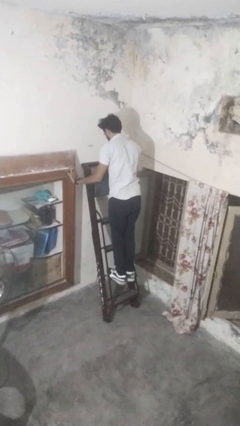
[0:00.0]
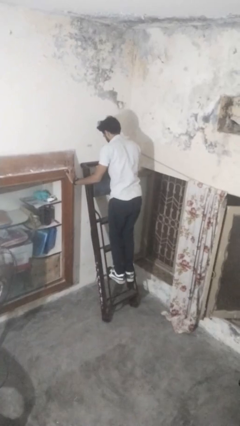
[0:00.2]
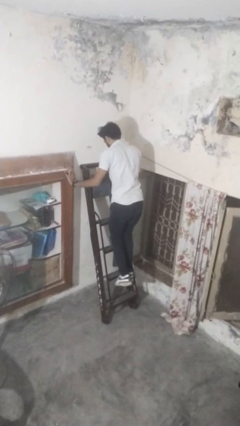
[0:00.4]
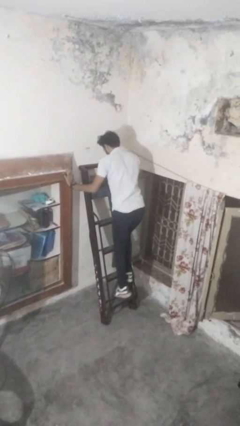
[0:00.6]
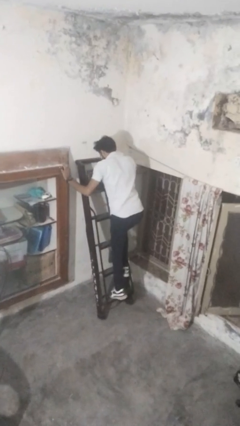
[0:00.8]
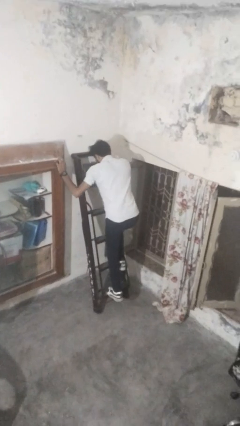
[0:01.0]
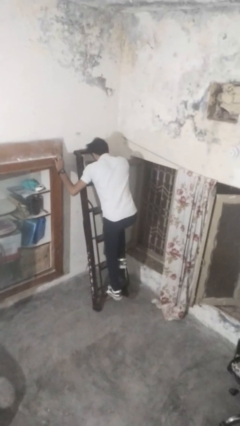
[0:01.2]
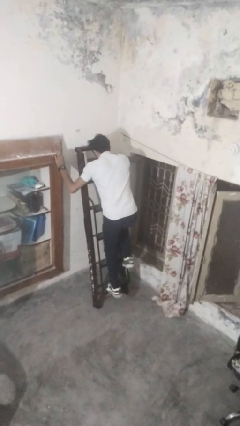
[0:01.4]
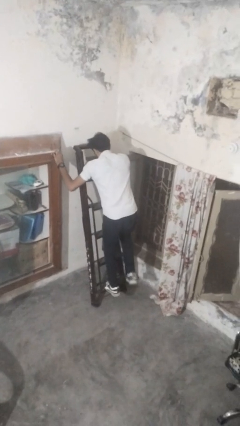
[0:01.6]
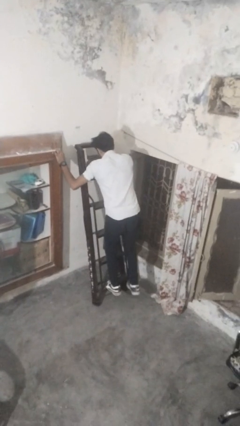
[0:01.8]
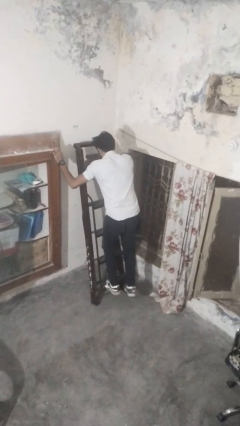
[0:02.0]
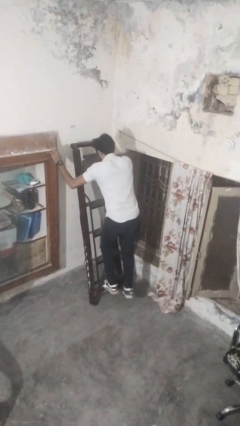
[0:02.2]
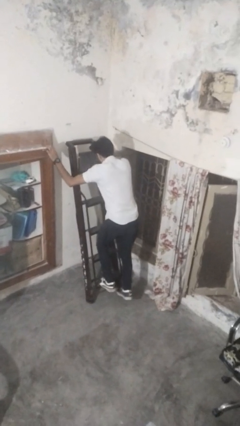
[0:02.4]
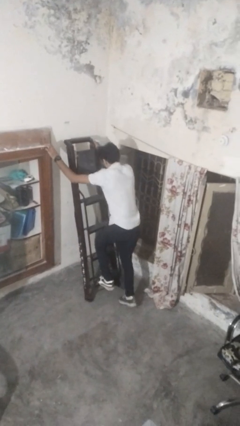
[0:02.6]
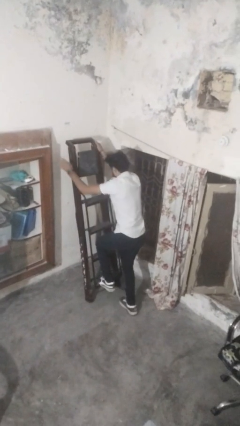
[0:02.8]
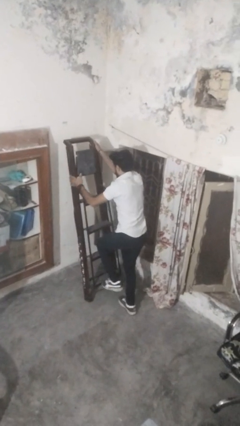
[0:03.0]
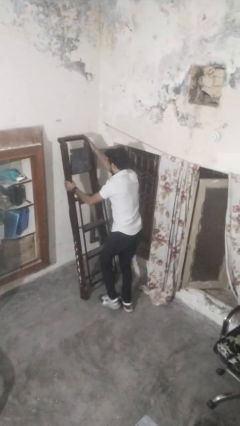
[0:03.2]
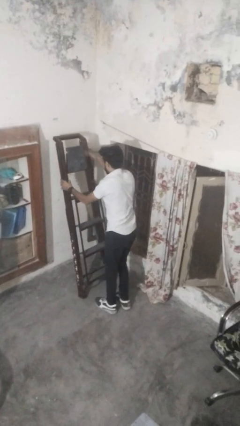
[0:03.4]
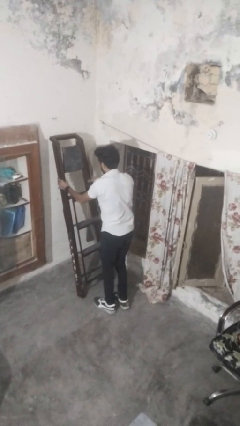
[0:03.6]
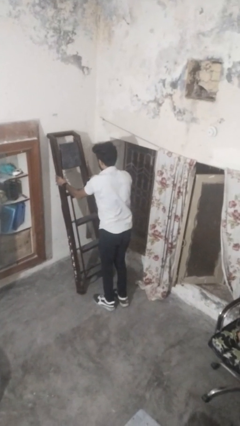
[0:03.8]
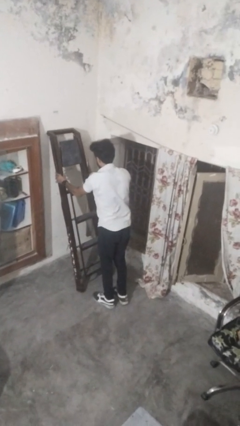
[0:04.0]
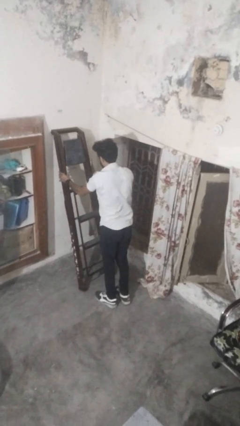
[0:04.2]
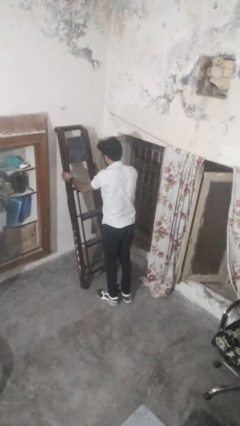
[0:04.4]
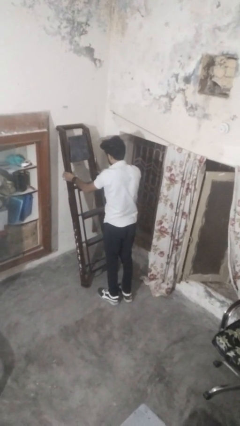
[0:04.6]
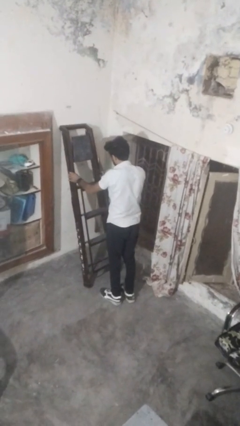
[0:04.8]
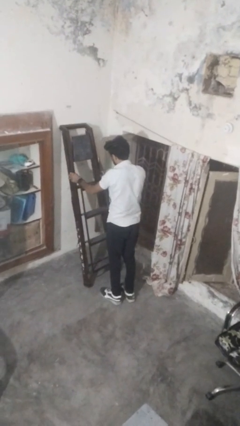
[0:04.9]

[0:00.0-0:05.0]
person climbs down ladder

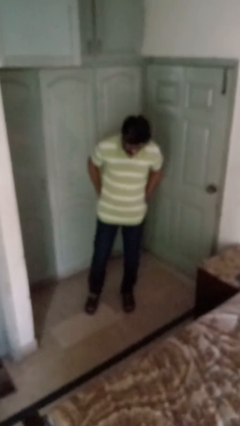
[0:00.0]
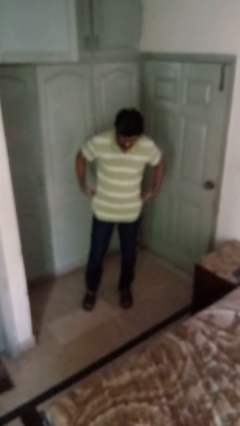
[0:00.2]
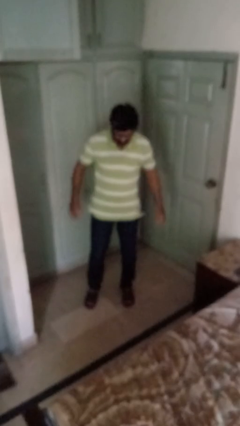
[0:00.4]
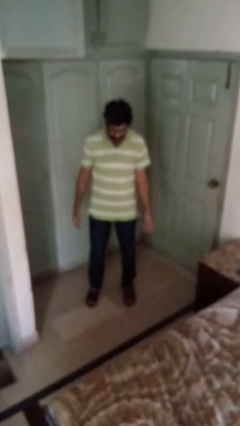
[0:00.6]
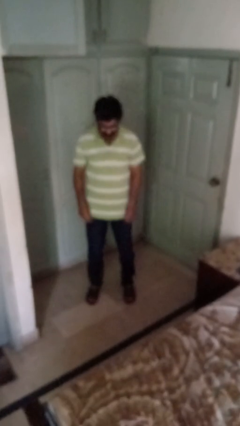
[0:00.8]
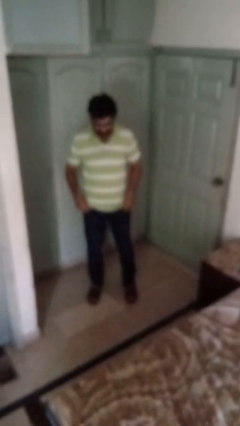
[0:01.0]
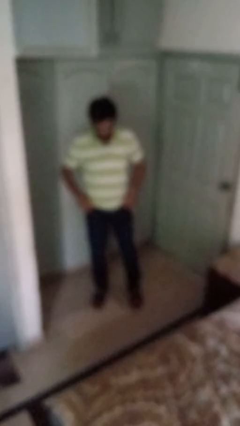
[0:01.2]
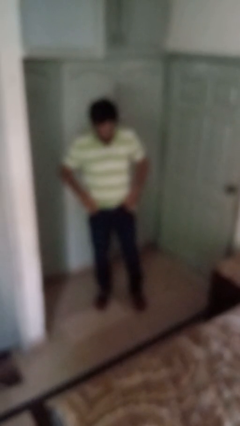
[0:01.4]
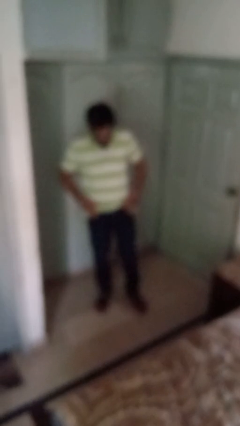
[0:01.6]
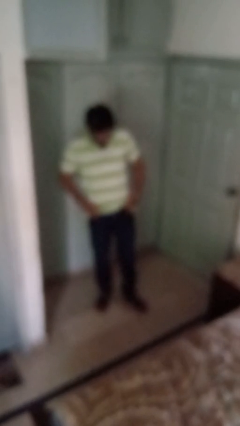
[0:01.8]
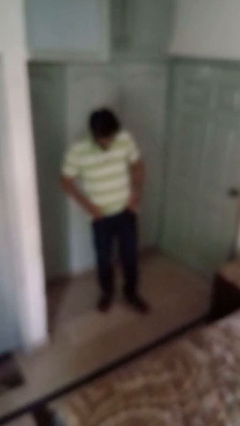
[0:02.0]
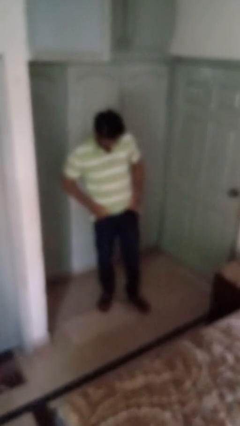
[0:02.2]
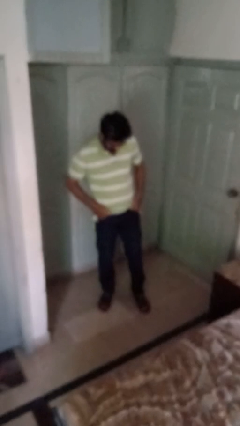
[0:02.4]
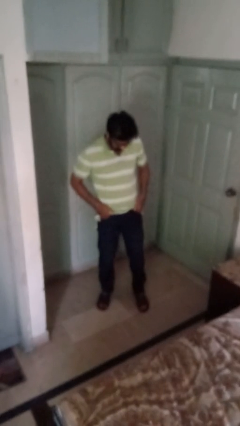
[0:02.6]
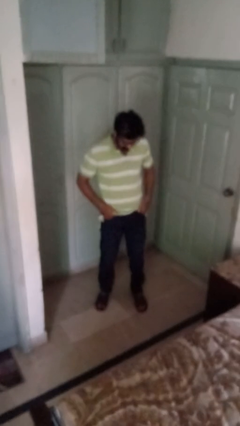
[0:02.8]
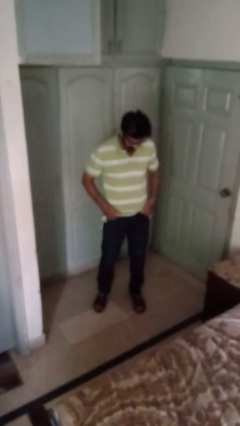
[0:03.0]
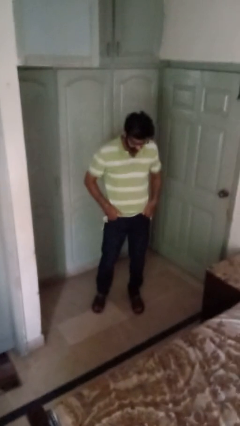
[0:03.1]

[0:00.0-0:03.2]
person puts hands in back pockets

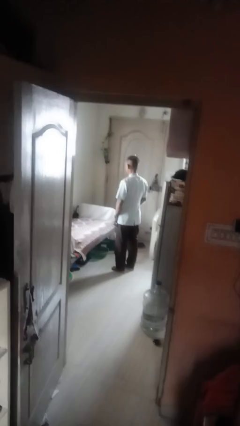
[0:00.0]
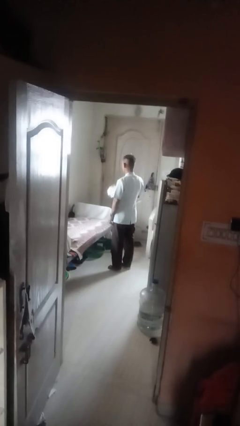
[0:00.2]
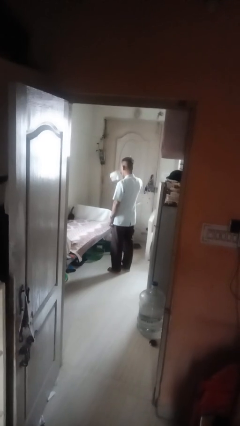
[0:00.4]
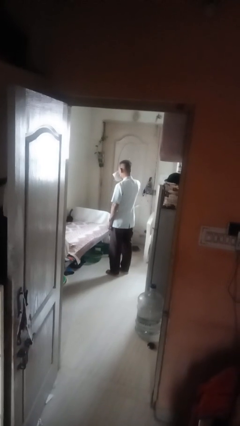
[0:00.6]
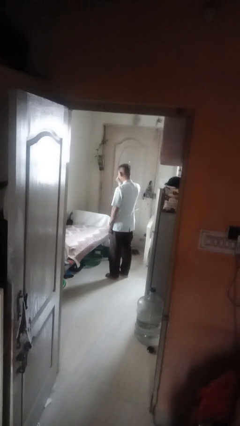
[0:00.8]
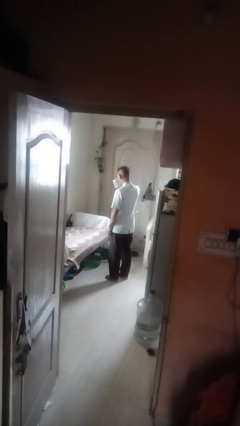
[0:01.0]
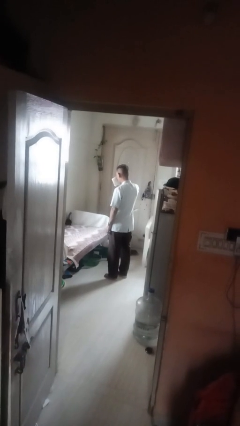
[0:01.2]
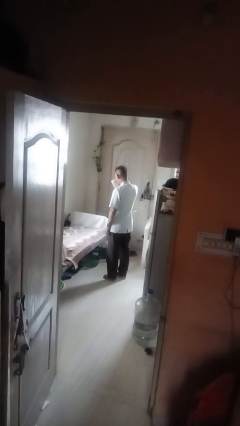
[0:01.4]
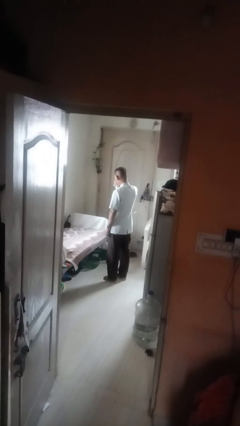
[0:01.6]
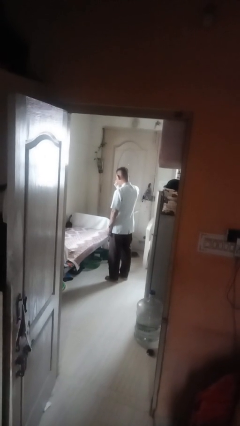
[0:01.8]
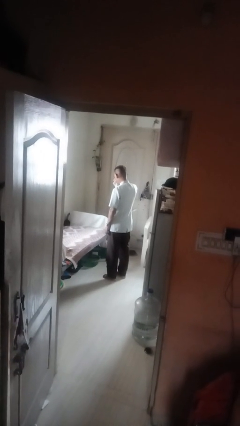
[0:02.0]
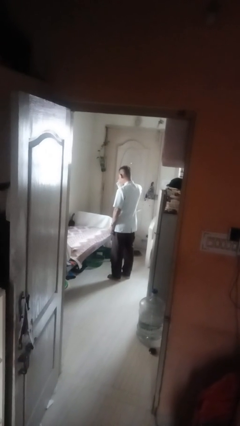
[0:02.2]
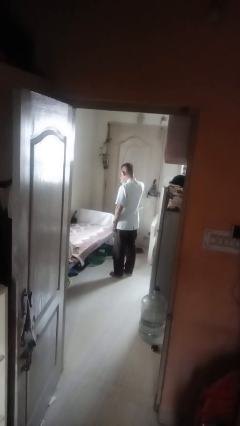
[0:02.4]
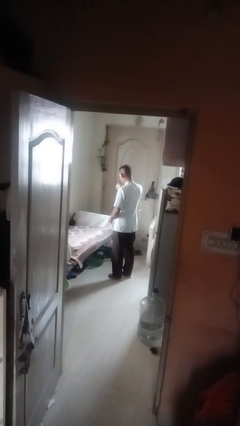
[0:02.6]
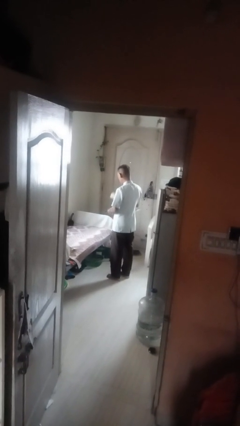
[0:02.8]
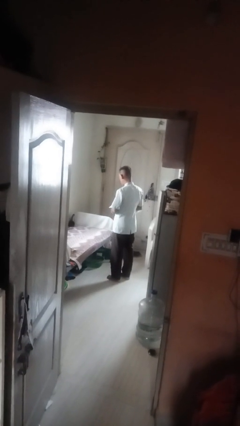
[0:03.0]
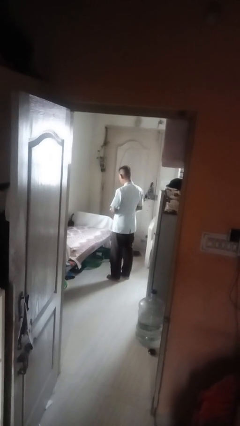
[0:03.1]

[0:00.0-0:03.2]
person blows nose

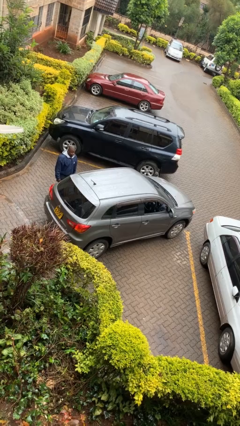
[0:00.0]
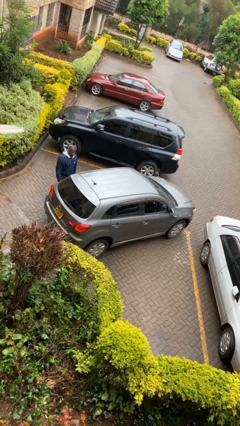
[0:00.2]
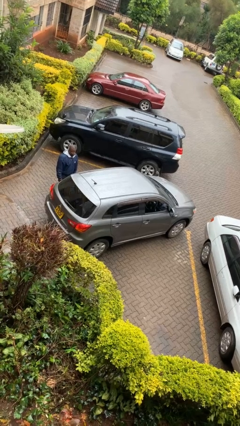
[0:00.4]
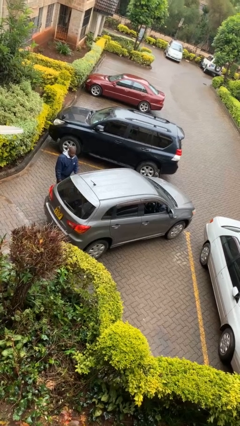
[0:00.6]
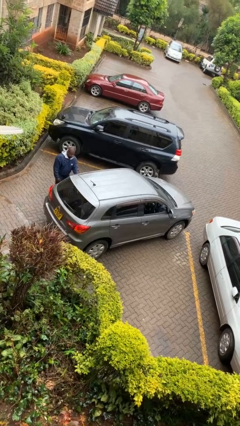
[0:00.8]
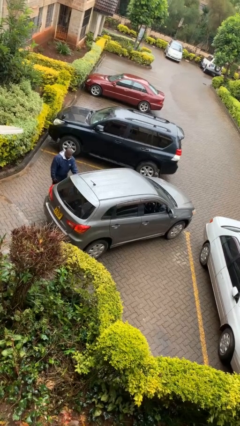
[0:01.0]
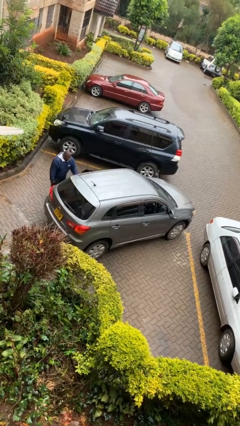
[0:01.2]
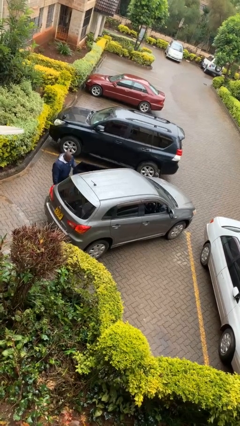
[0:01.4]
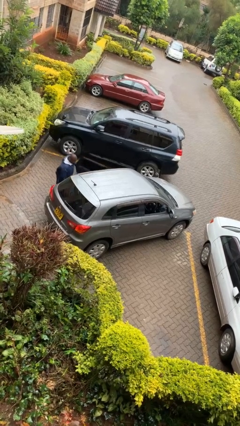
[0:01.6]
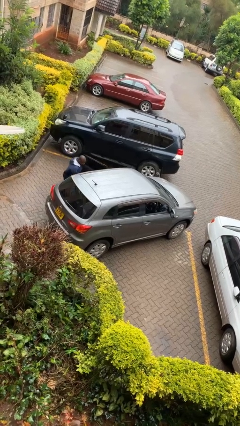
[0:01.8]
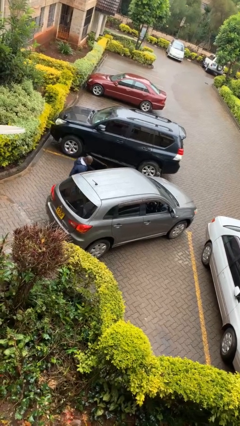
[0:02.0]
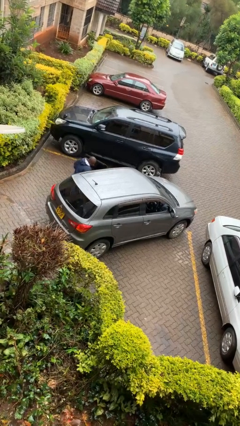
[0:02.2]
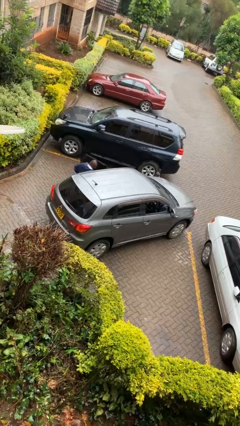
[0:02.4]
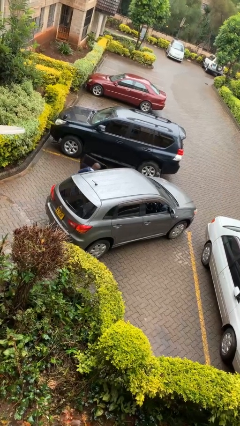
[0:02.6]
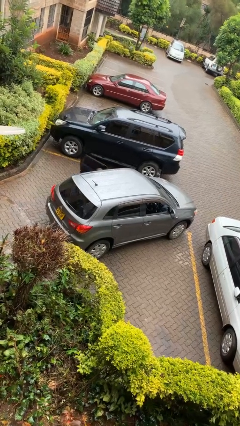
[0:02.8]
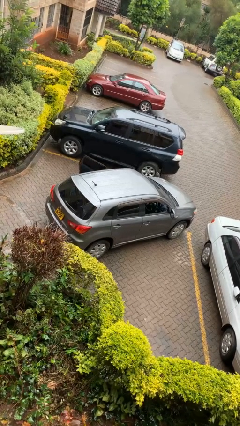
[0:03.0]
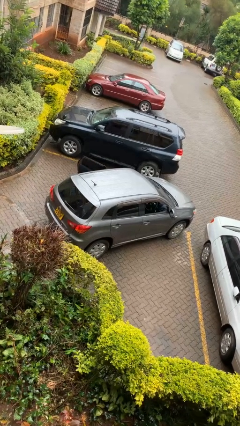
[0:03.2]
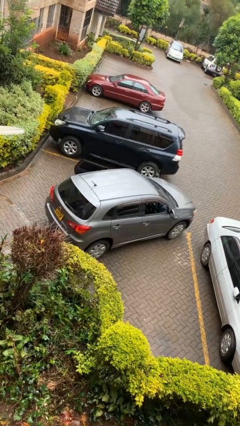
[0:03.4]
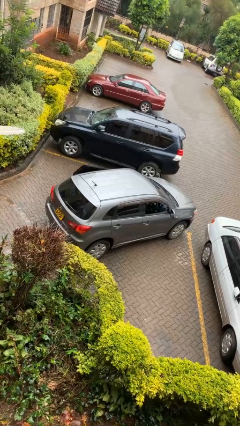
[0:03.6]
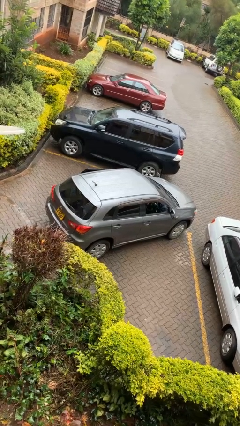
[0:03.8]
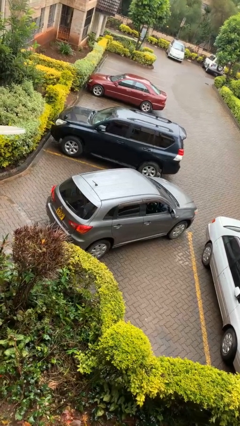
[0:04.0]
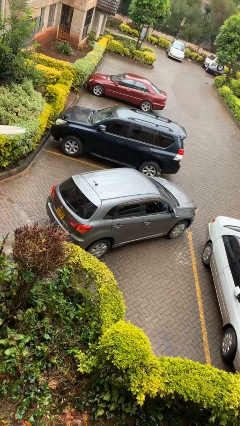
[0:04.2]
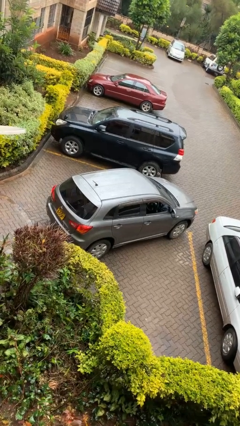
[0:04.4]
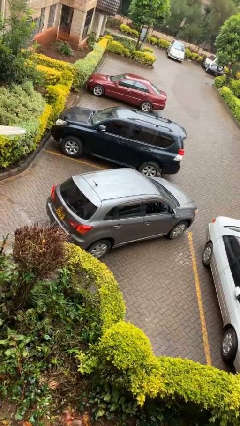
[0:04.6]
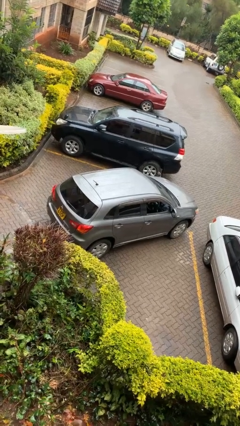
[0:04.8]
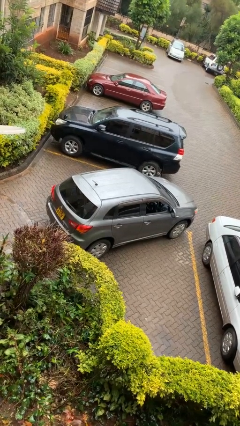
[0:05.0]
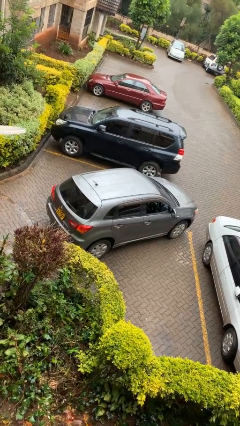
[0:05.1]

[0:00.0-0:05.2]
car picks up person

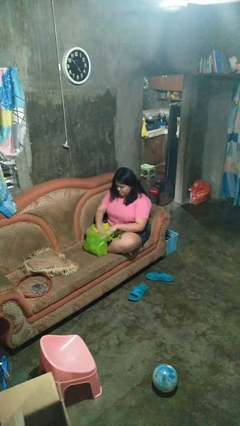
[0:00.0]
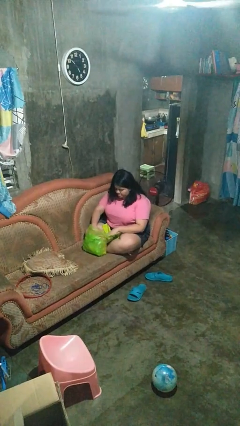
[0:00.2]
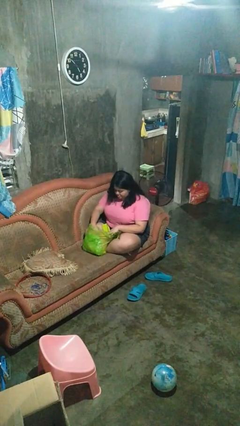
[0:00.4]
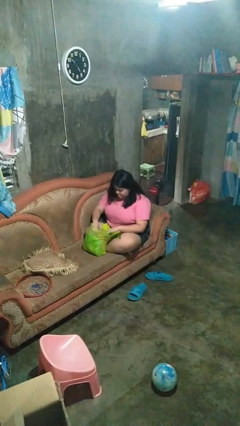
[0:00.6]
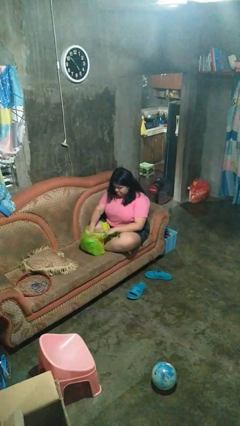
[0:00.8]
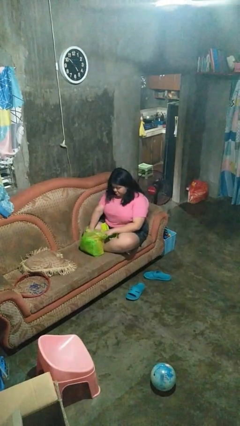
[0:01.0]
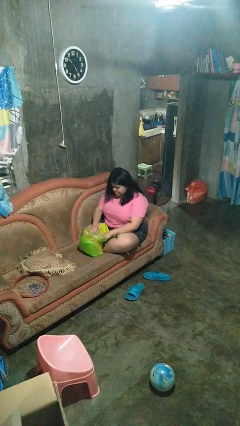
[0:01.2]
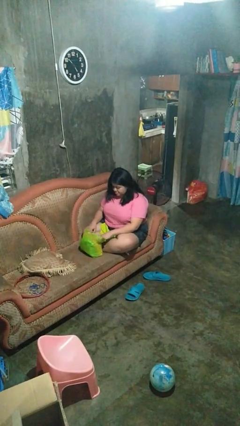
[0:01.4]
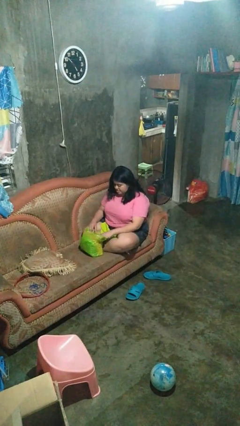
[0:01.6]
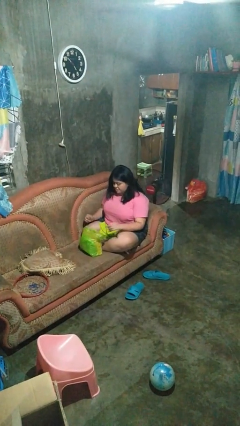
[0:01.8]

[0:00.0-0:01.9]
person searches in bag
